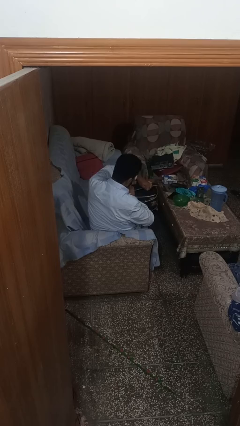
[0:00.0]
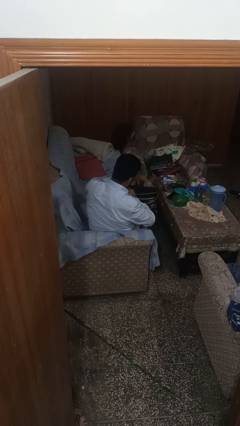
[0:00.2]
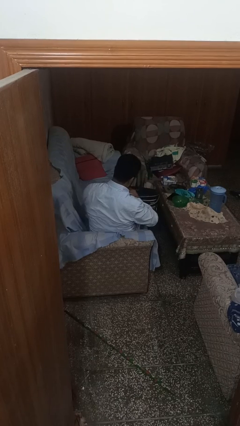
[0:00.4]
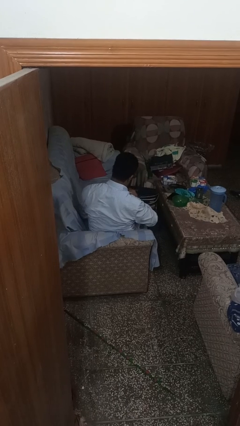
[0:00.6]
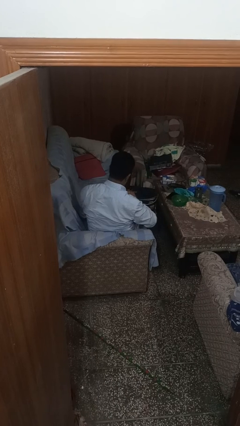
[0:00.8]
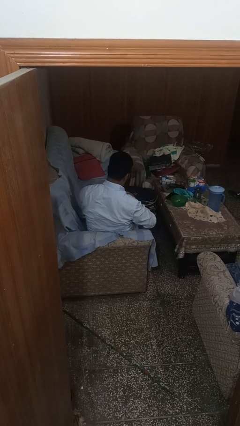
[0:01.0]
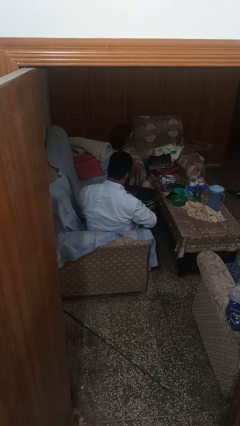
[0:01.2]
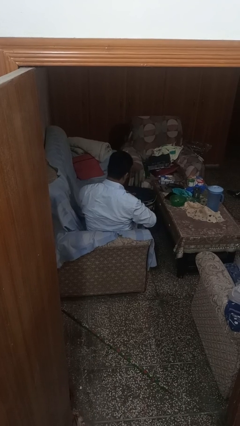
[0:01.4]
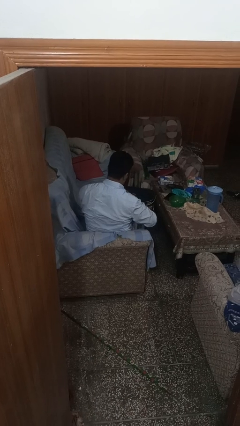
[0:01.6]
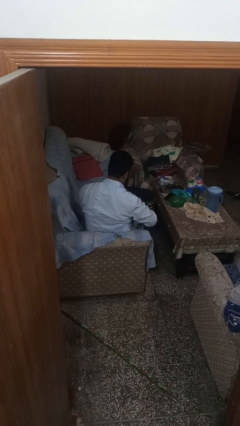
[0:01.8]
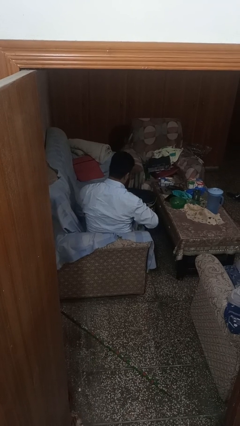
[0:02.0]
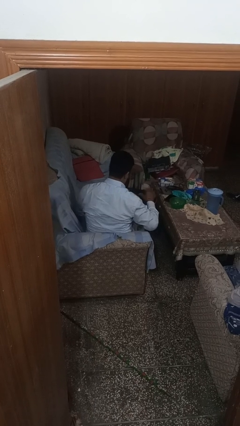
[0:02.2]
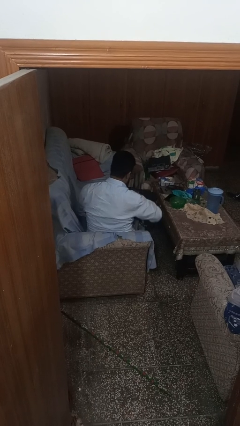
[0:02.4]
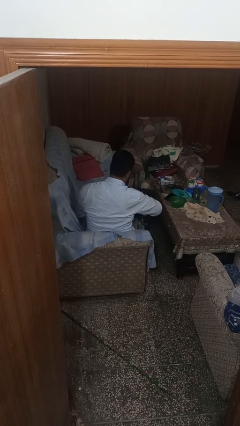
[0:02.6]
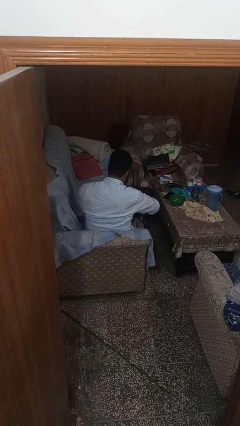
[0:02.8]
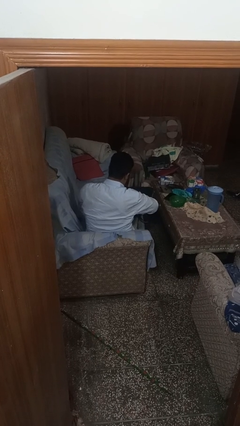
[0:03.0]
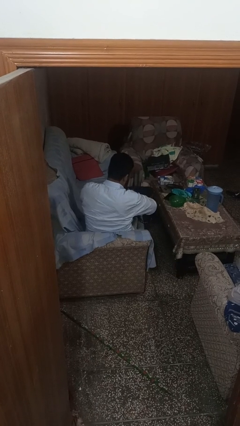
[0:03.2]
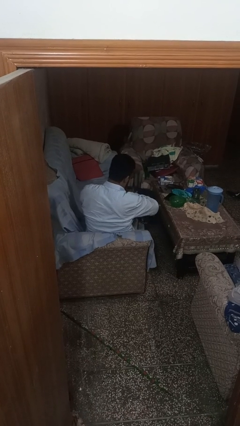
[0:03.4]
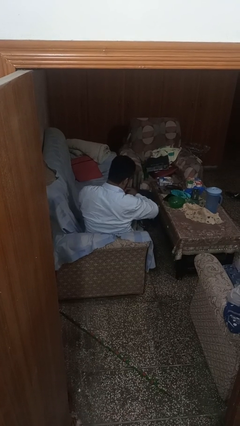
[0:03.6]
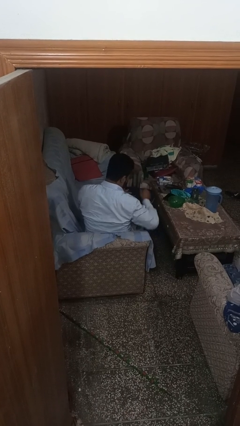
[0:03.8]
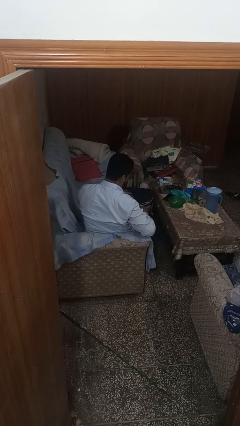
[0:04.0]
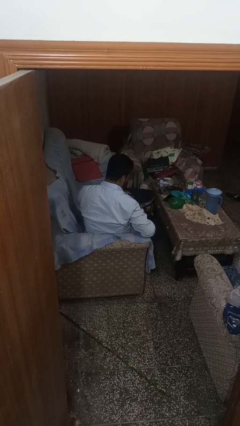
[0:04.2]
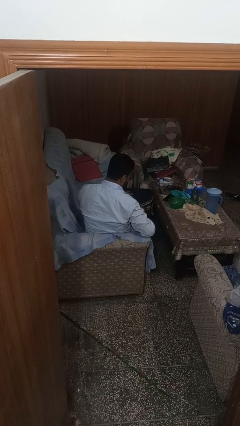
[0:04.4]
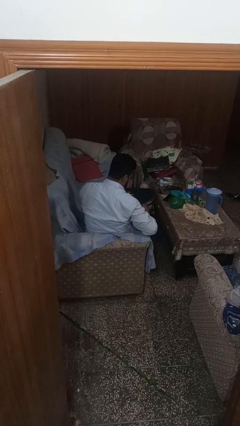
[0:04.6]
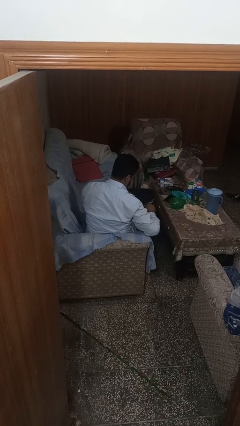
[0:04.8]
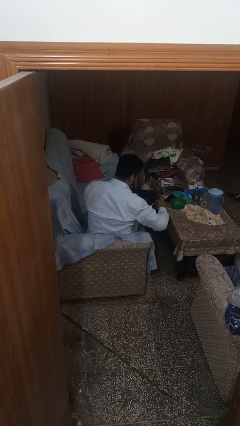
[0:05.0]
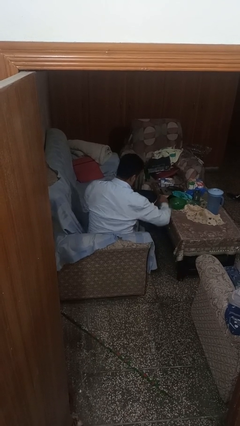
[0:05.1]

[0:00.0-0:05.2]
person closes suitcase

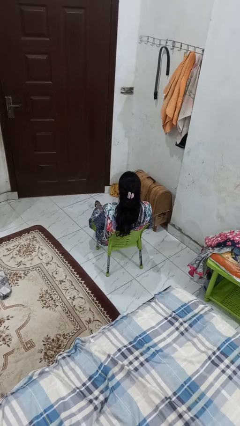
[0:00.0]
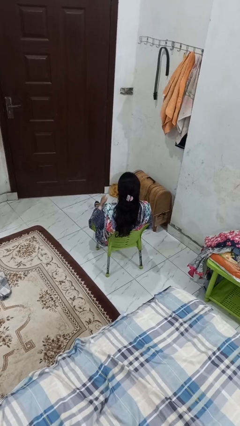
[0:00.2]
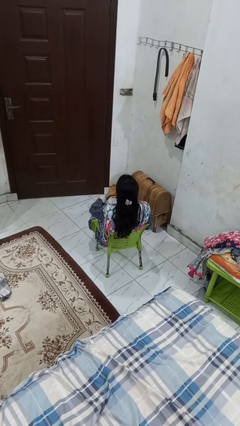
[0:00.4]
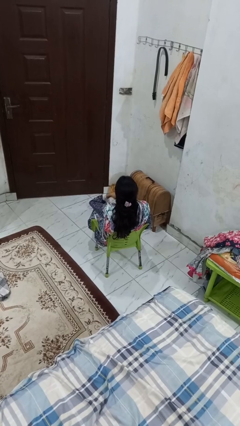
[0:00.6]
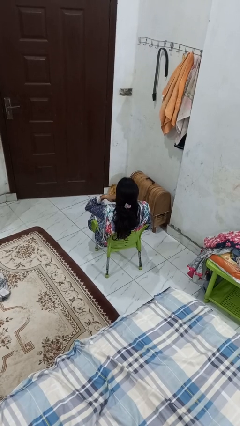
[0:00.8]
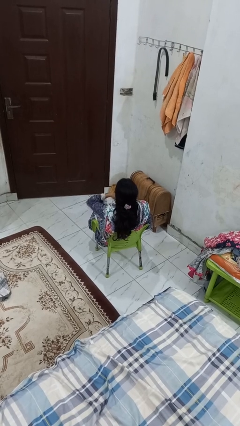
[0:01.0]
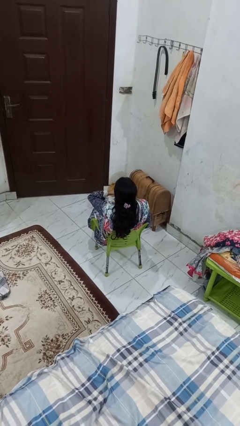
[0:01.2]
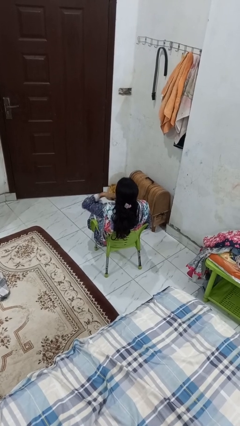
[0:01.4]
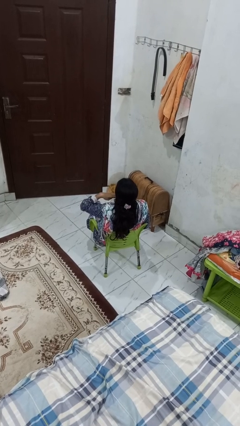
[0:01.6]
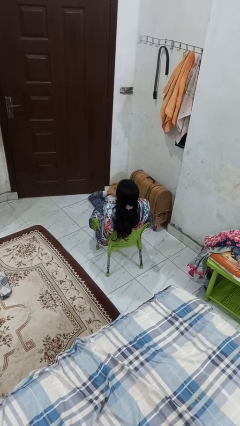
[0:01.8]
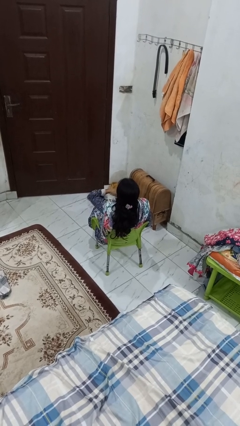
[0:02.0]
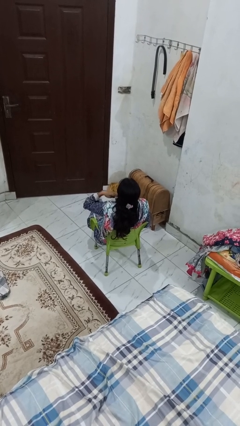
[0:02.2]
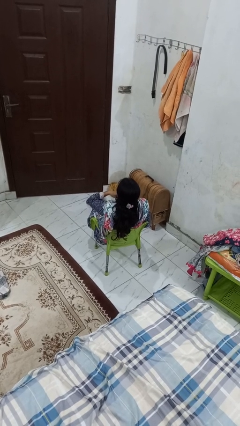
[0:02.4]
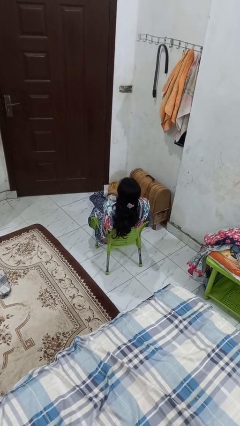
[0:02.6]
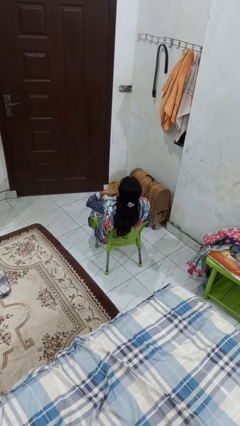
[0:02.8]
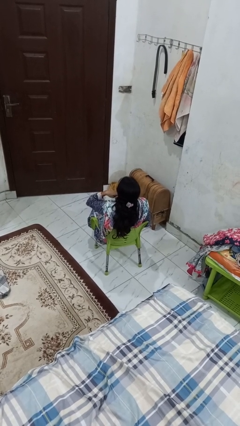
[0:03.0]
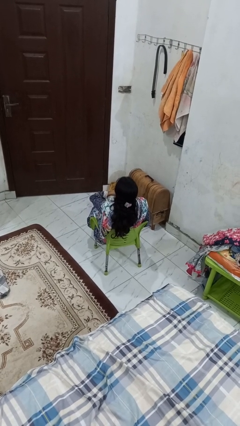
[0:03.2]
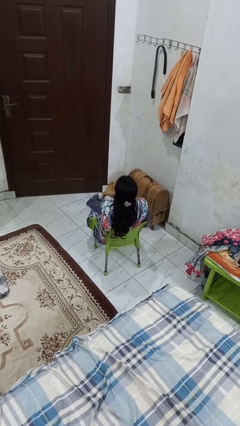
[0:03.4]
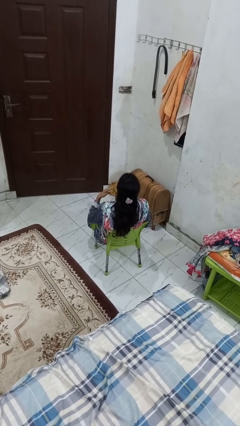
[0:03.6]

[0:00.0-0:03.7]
person gestures cut

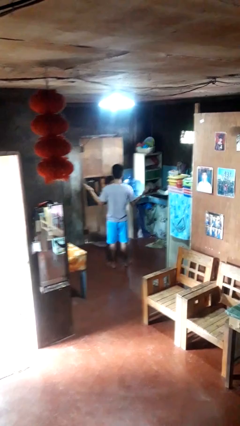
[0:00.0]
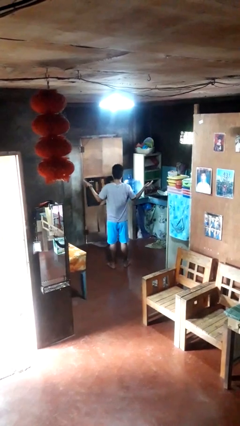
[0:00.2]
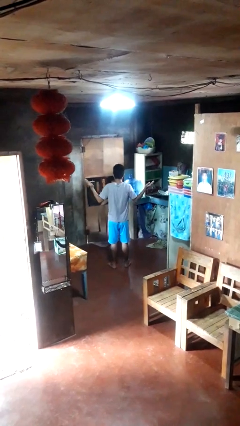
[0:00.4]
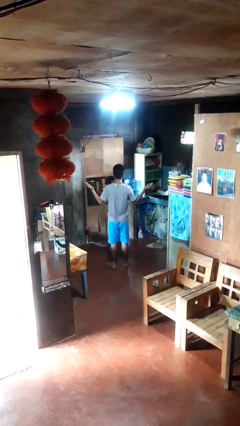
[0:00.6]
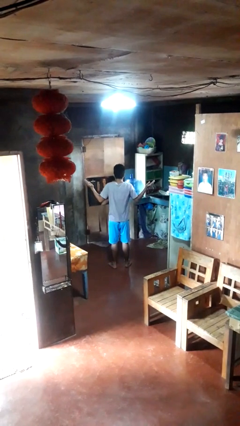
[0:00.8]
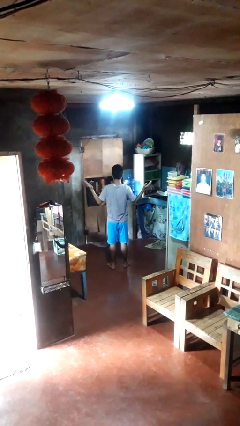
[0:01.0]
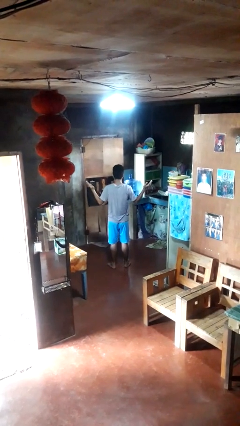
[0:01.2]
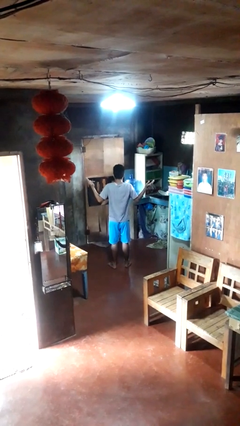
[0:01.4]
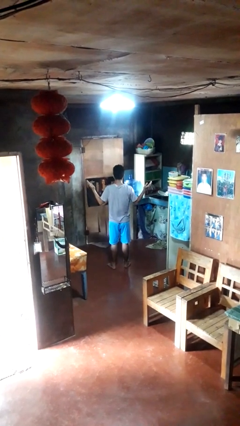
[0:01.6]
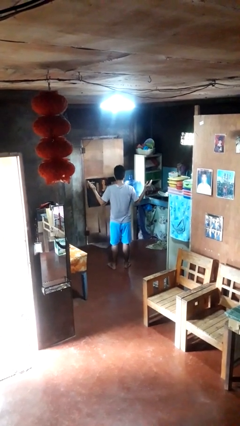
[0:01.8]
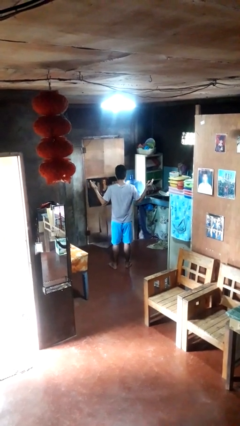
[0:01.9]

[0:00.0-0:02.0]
person shrugs

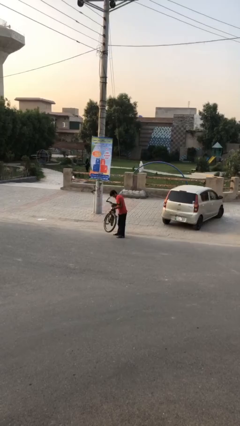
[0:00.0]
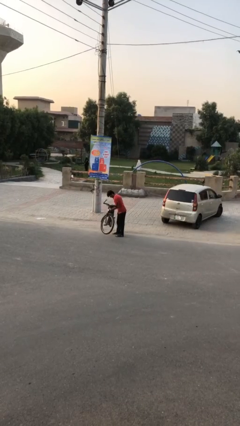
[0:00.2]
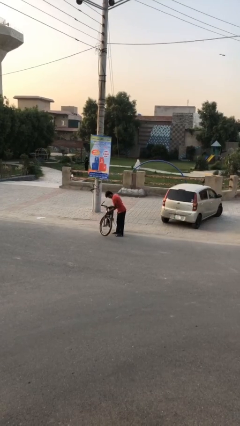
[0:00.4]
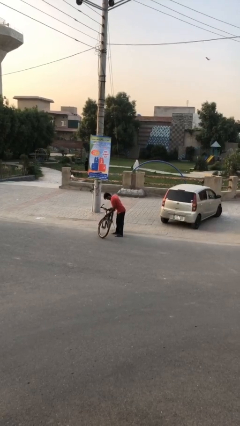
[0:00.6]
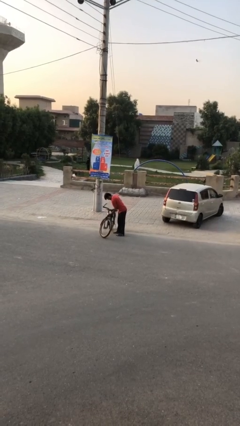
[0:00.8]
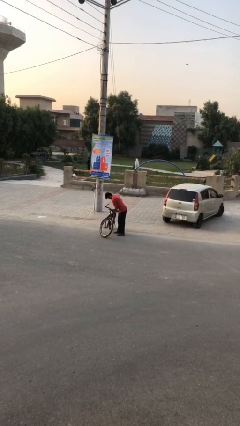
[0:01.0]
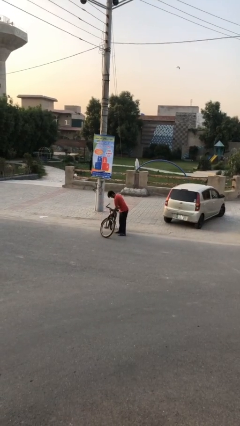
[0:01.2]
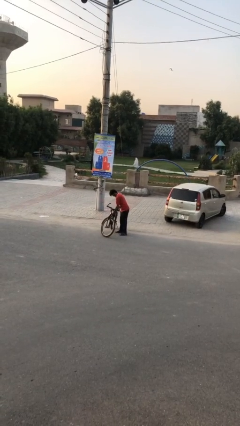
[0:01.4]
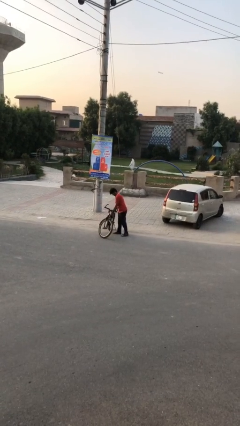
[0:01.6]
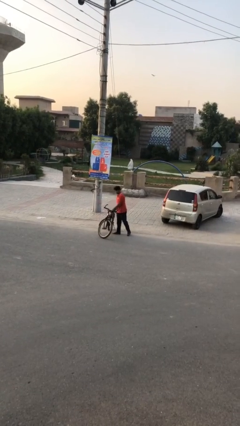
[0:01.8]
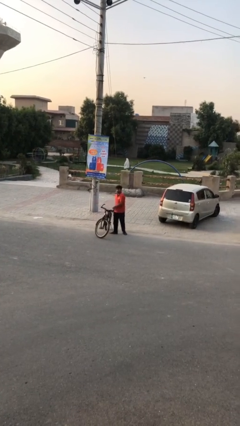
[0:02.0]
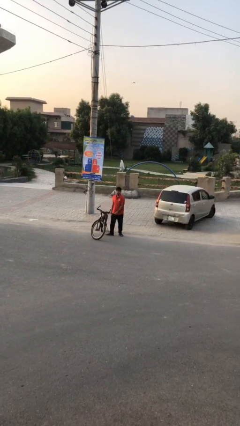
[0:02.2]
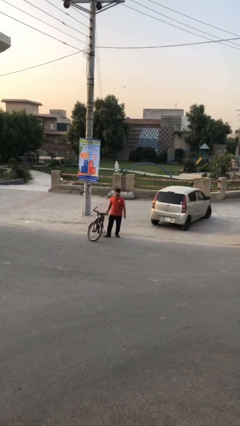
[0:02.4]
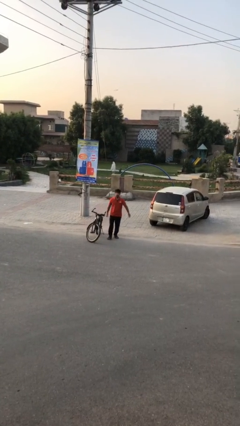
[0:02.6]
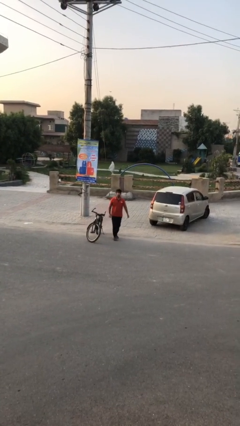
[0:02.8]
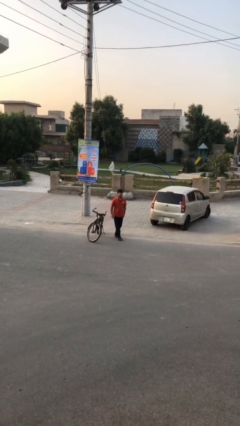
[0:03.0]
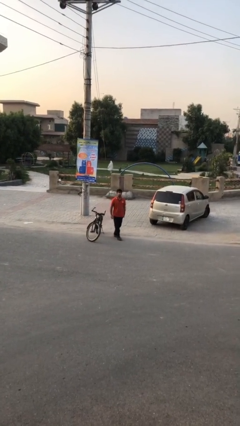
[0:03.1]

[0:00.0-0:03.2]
person puts down object on floor

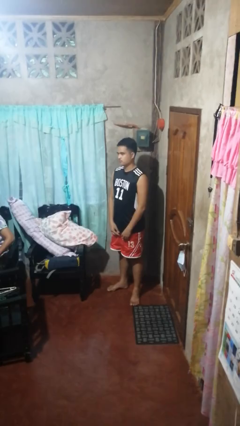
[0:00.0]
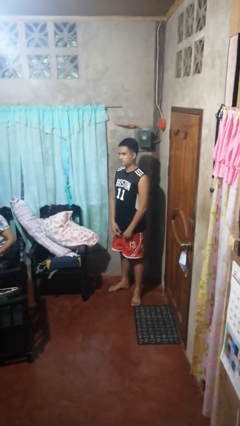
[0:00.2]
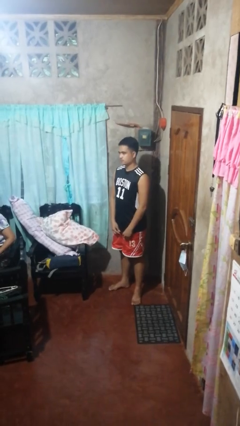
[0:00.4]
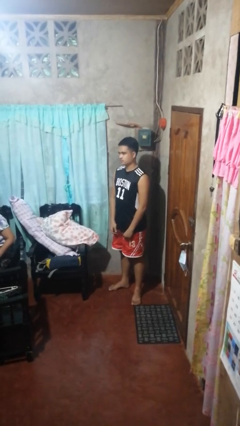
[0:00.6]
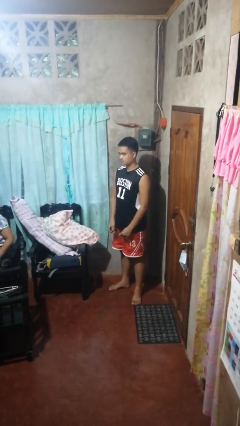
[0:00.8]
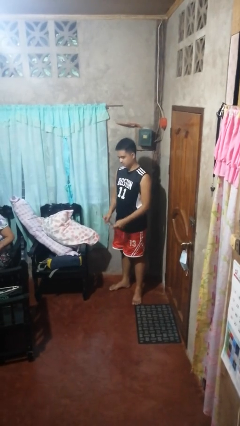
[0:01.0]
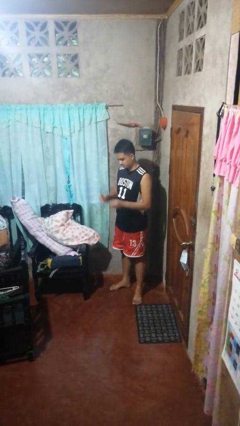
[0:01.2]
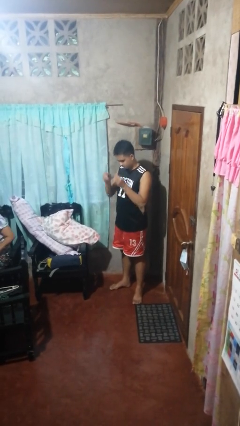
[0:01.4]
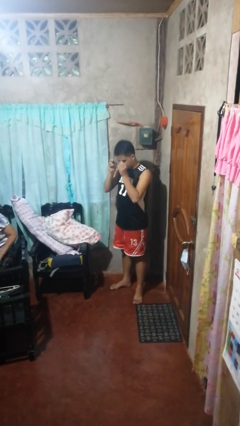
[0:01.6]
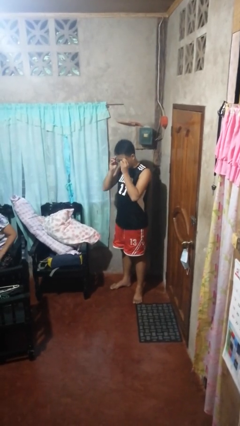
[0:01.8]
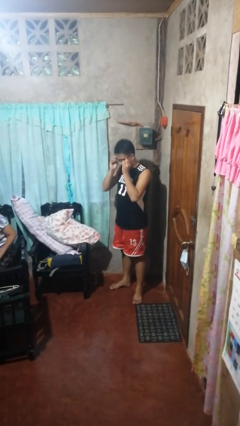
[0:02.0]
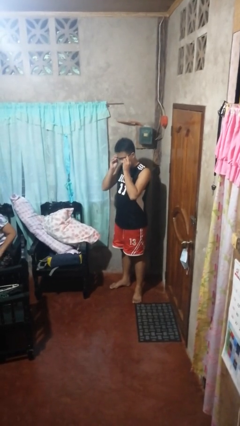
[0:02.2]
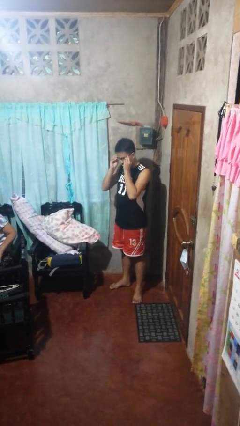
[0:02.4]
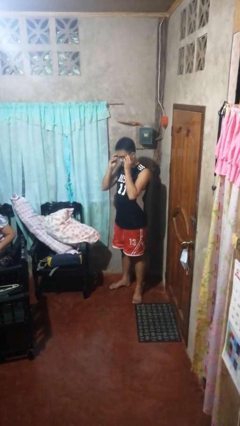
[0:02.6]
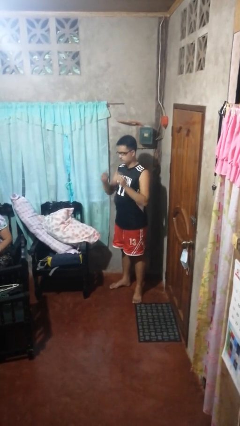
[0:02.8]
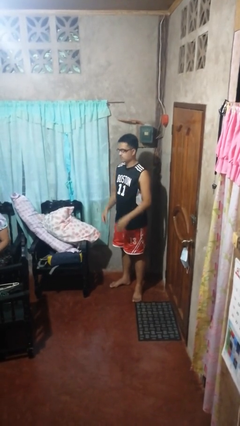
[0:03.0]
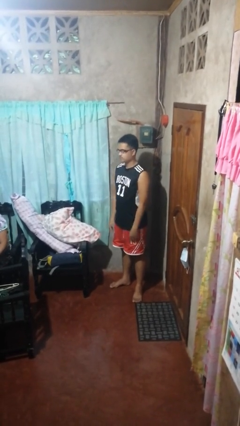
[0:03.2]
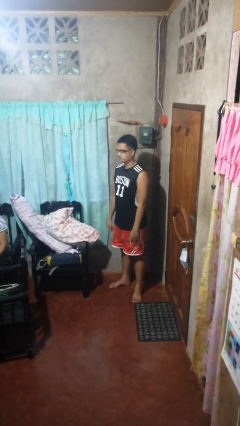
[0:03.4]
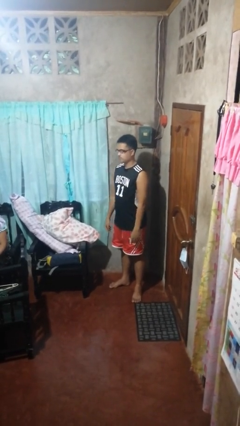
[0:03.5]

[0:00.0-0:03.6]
person puts on glasses
